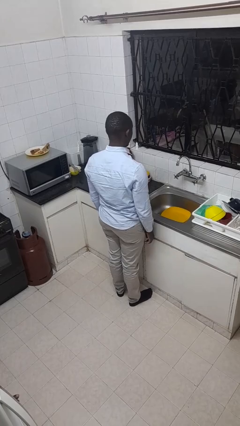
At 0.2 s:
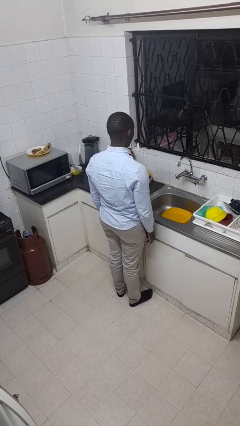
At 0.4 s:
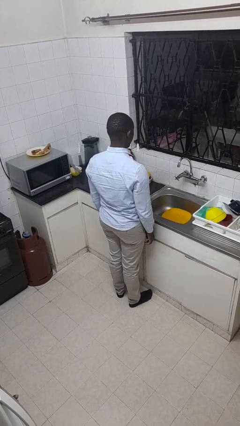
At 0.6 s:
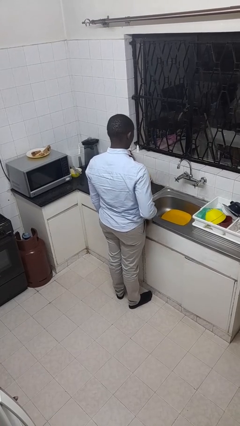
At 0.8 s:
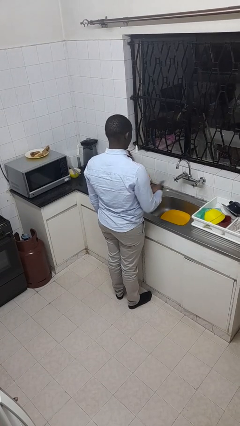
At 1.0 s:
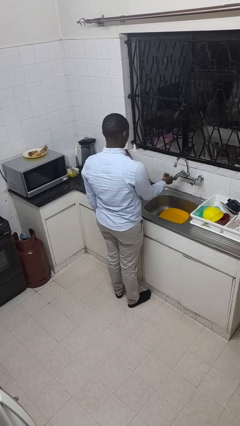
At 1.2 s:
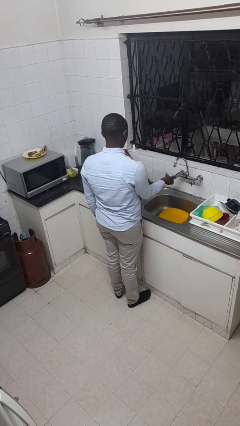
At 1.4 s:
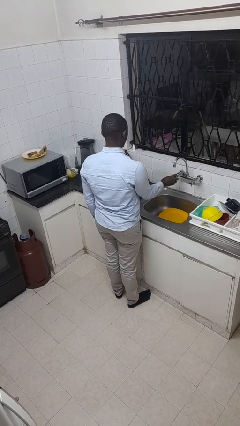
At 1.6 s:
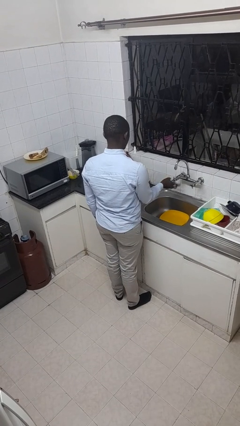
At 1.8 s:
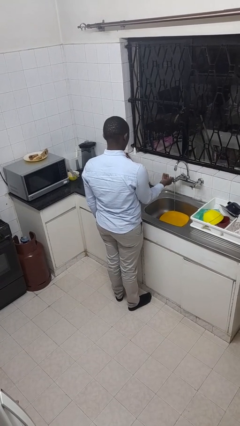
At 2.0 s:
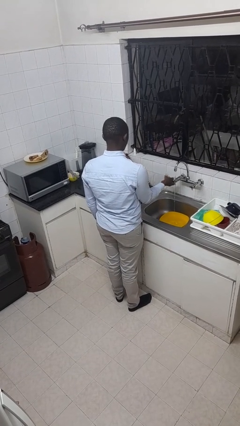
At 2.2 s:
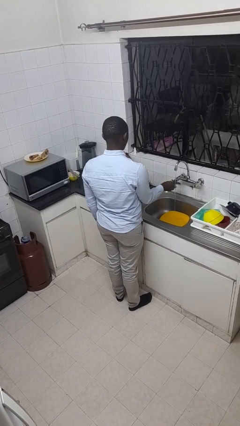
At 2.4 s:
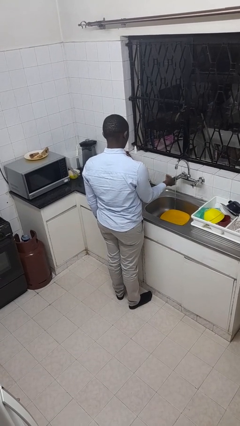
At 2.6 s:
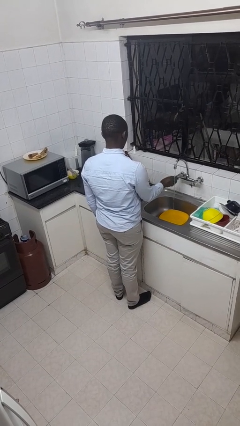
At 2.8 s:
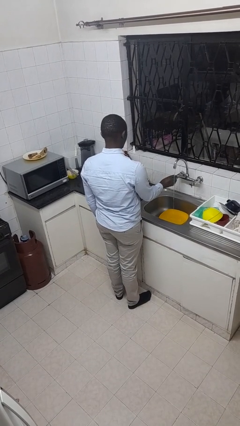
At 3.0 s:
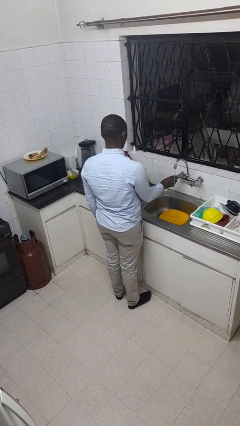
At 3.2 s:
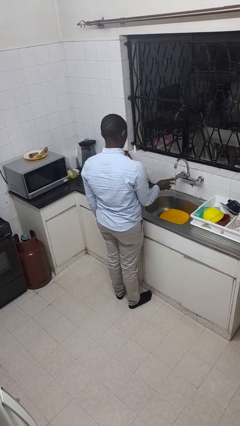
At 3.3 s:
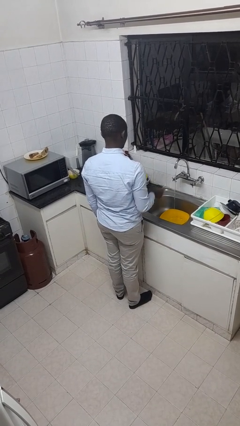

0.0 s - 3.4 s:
person turns on faucet

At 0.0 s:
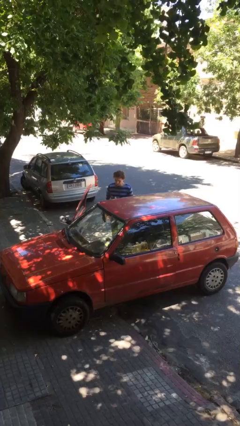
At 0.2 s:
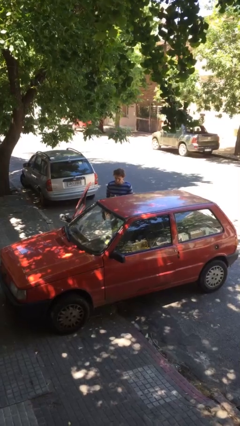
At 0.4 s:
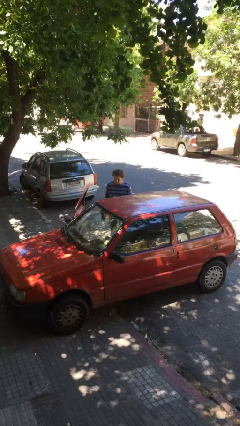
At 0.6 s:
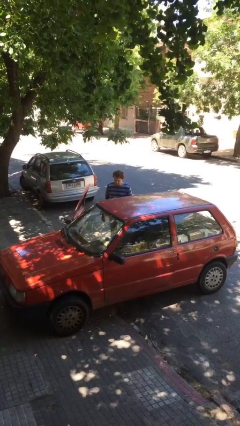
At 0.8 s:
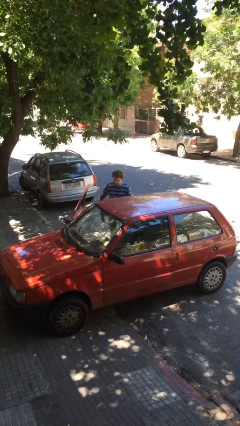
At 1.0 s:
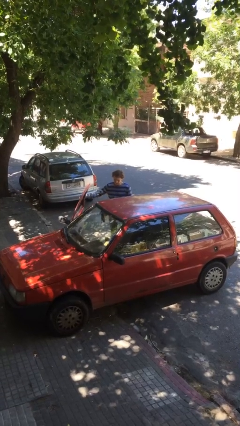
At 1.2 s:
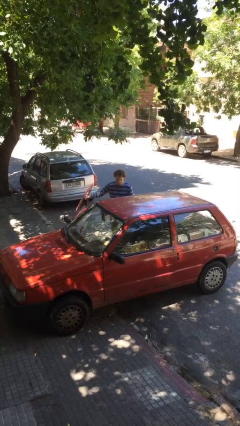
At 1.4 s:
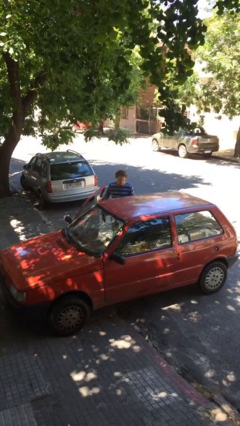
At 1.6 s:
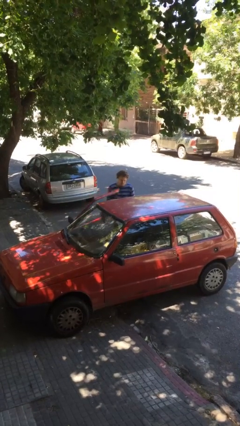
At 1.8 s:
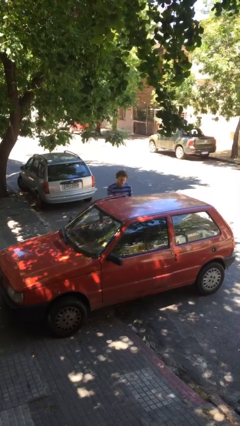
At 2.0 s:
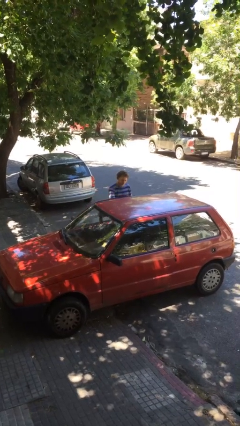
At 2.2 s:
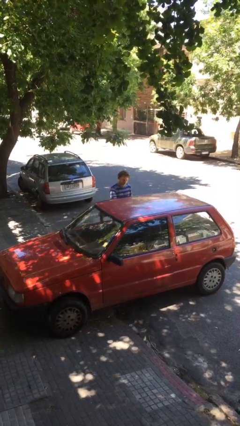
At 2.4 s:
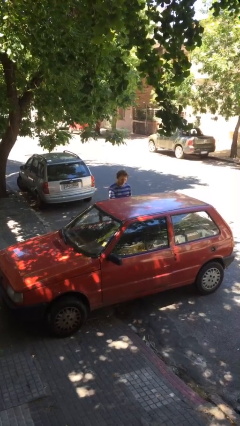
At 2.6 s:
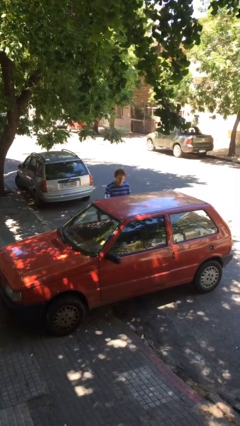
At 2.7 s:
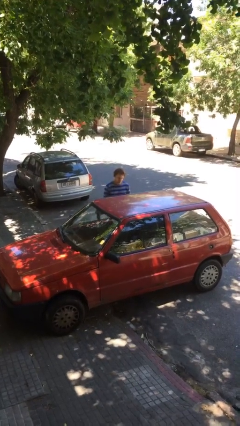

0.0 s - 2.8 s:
person closes car door

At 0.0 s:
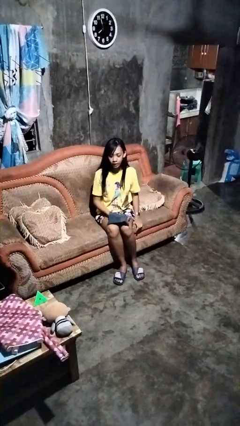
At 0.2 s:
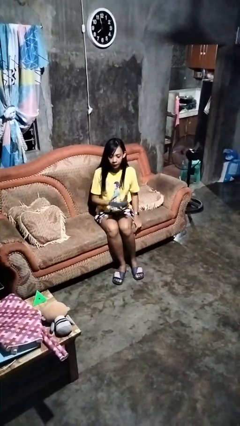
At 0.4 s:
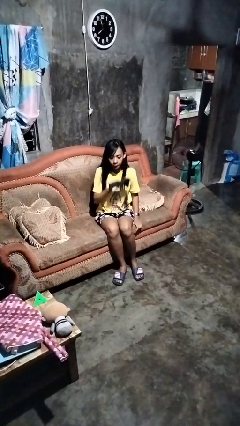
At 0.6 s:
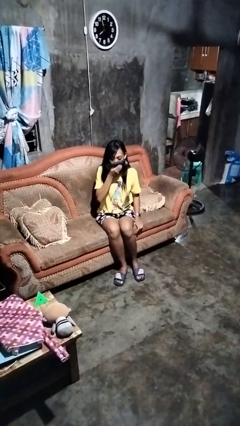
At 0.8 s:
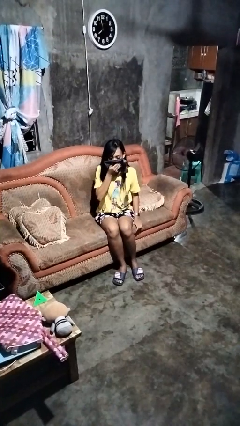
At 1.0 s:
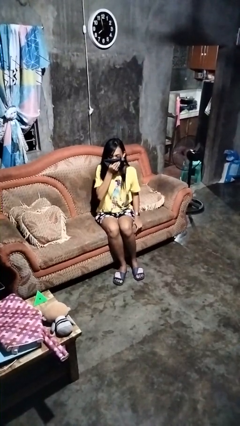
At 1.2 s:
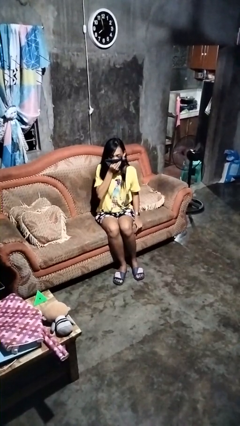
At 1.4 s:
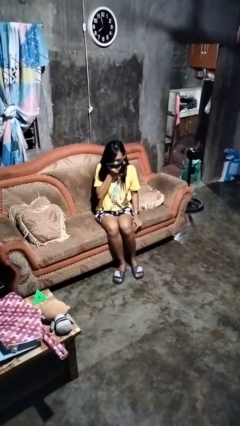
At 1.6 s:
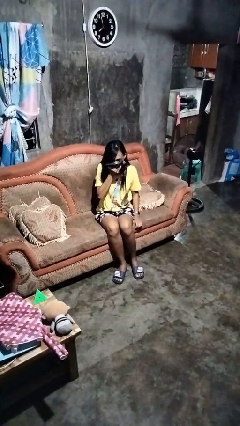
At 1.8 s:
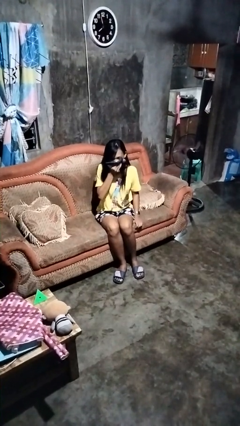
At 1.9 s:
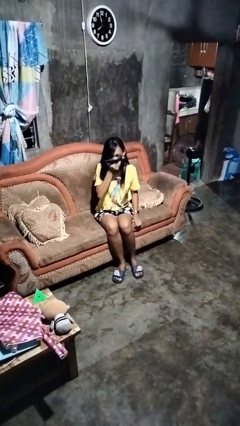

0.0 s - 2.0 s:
person blows nose

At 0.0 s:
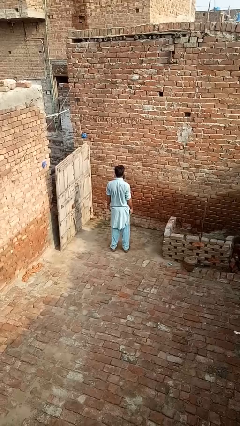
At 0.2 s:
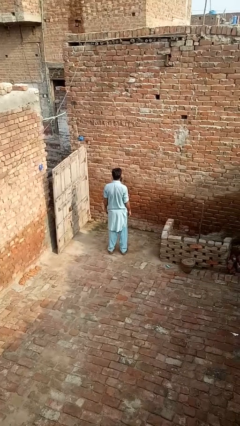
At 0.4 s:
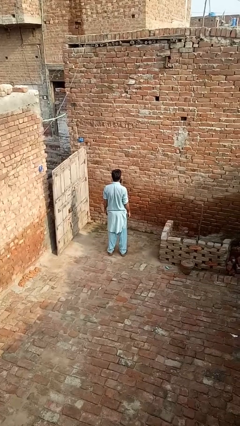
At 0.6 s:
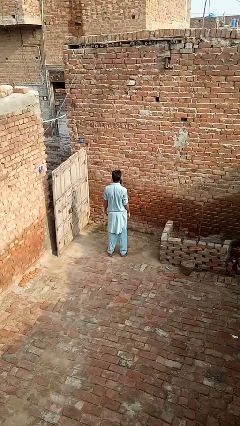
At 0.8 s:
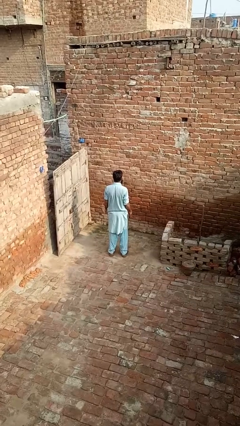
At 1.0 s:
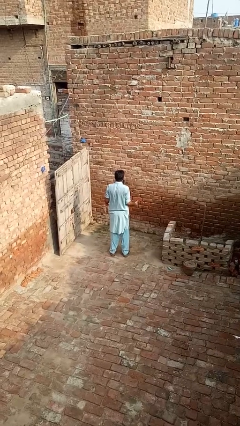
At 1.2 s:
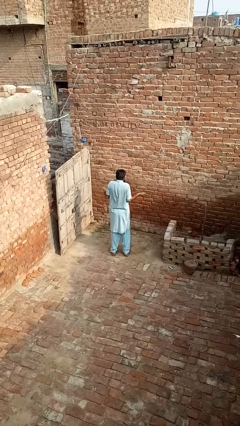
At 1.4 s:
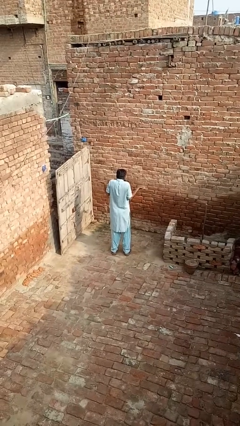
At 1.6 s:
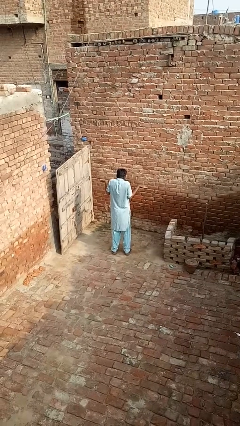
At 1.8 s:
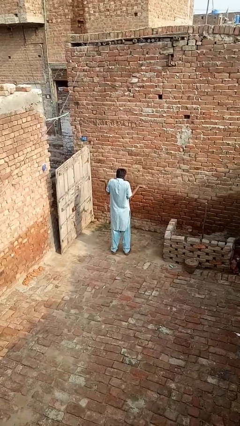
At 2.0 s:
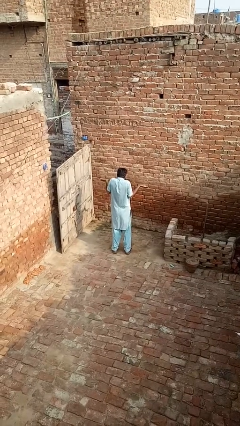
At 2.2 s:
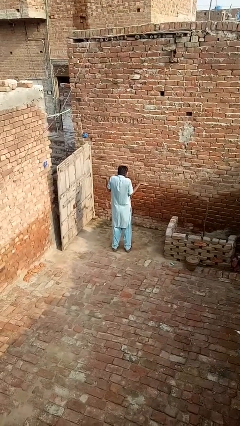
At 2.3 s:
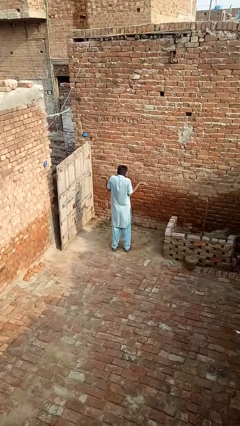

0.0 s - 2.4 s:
person shrugs

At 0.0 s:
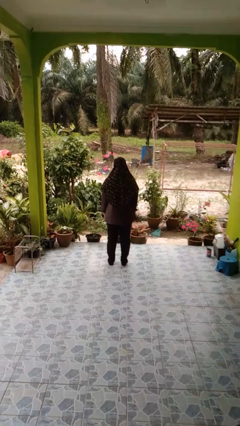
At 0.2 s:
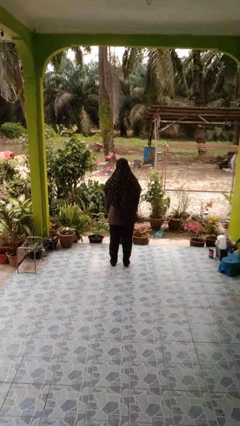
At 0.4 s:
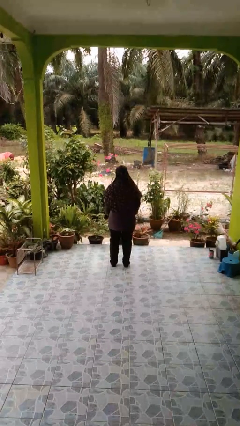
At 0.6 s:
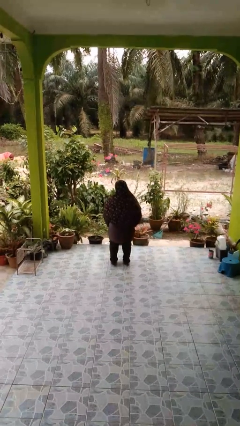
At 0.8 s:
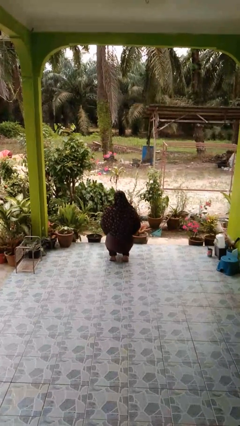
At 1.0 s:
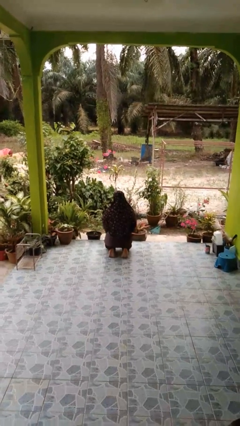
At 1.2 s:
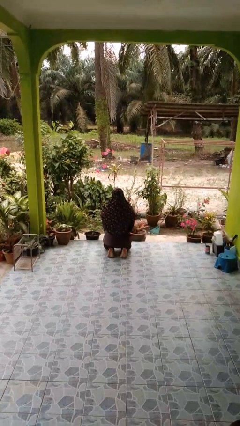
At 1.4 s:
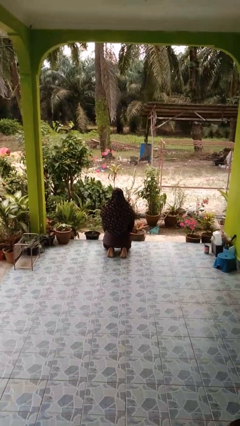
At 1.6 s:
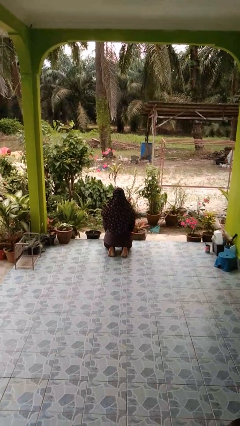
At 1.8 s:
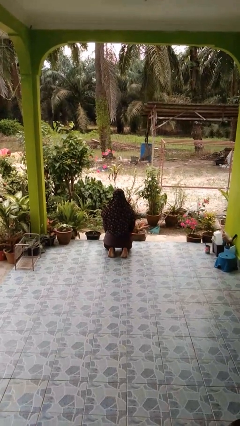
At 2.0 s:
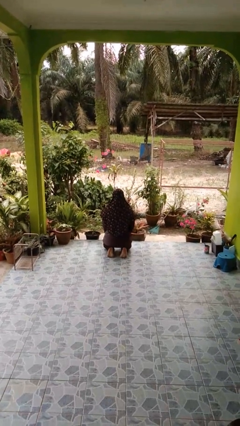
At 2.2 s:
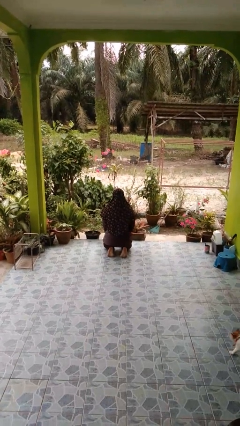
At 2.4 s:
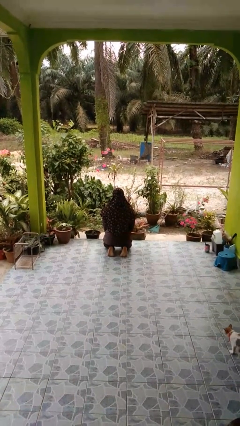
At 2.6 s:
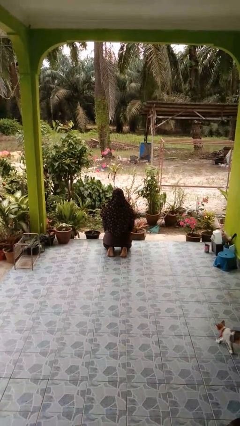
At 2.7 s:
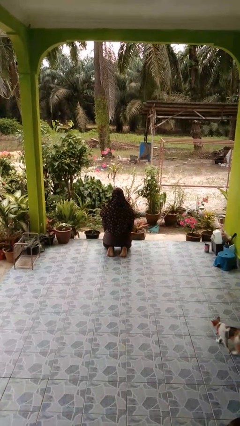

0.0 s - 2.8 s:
person kneels

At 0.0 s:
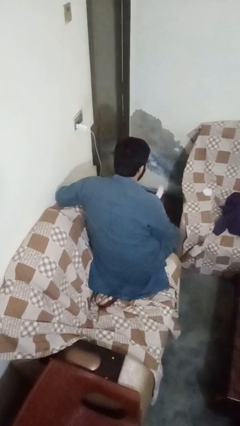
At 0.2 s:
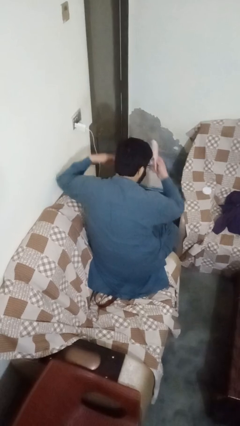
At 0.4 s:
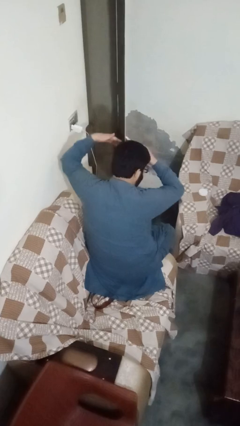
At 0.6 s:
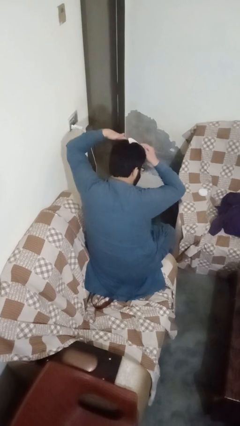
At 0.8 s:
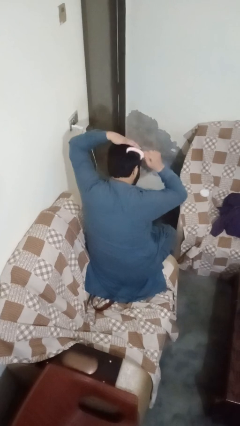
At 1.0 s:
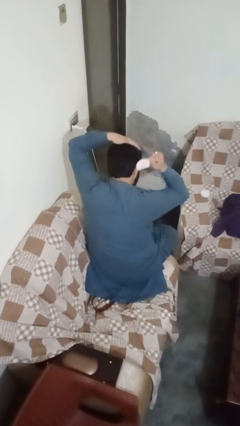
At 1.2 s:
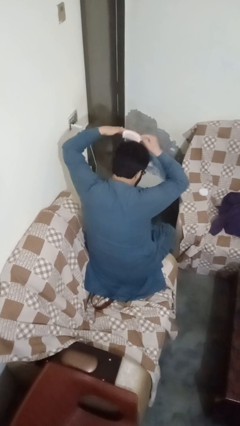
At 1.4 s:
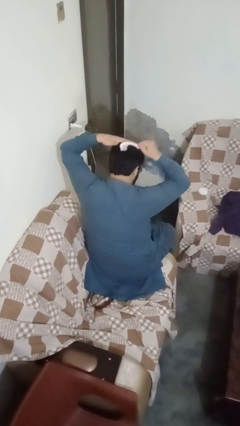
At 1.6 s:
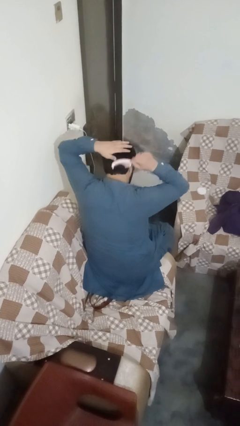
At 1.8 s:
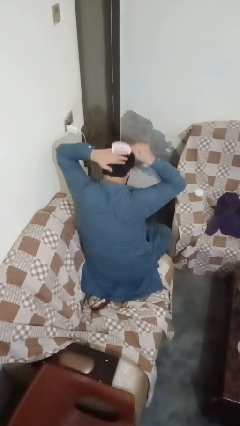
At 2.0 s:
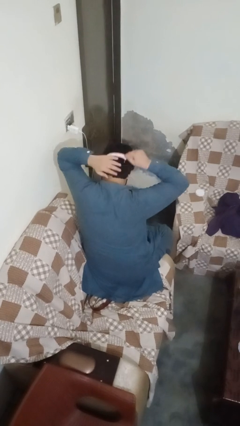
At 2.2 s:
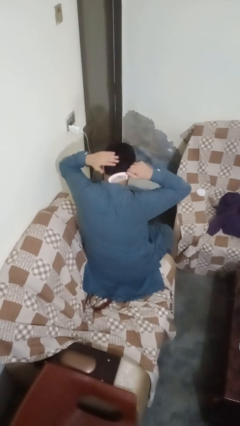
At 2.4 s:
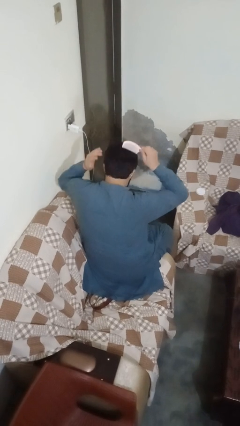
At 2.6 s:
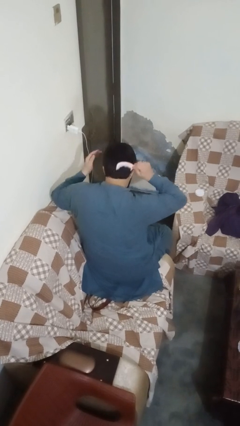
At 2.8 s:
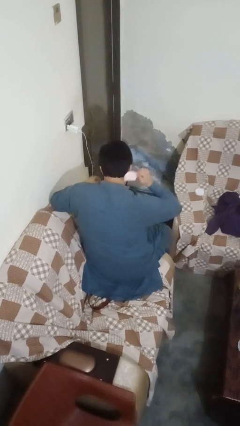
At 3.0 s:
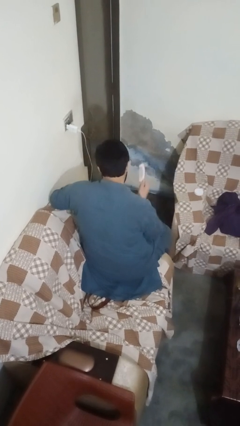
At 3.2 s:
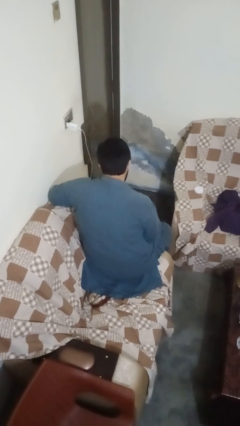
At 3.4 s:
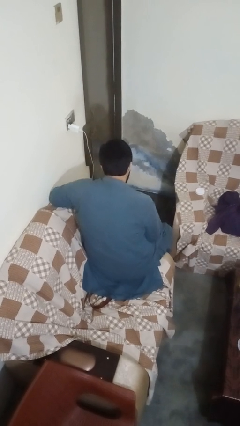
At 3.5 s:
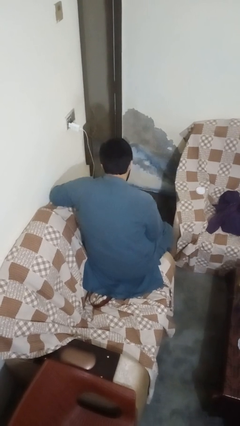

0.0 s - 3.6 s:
person brushes hair

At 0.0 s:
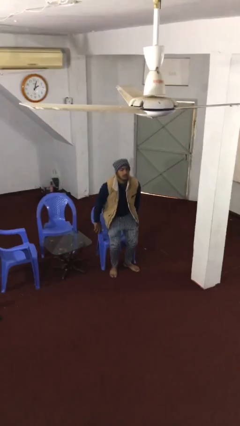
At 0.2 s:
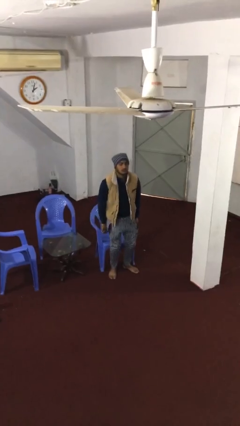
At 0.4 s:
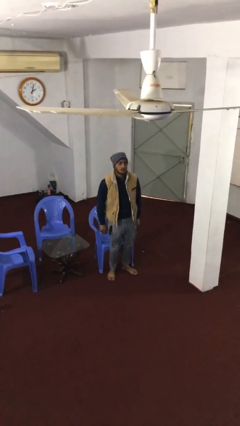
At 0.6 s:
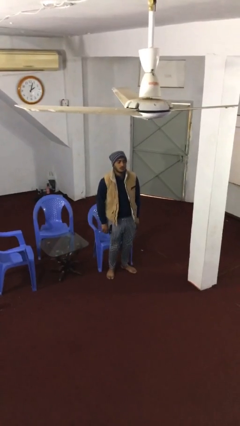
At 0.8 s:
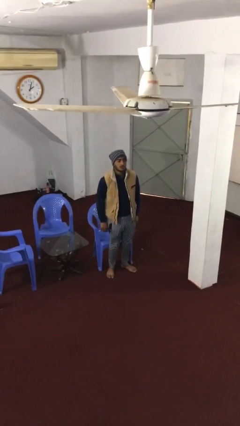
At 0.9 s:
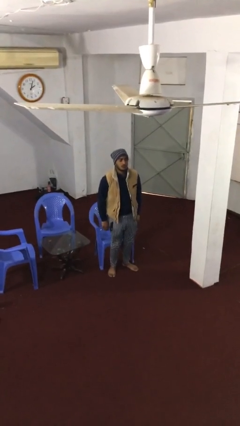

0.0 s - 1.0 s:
person stands up
